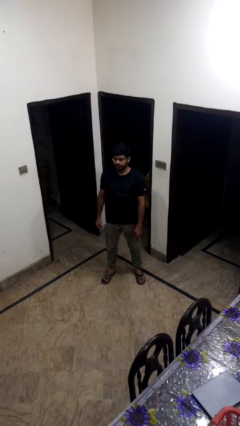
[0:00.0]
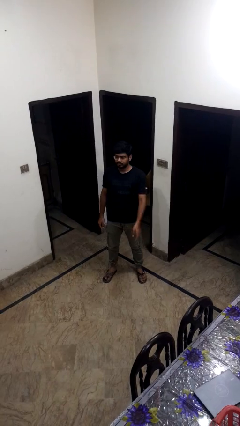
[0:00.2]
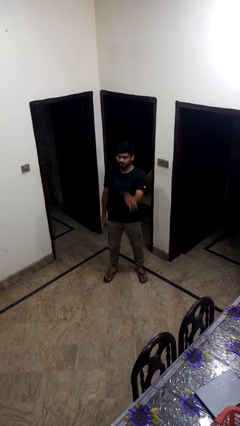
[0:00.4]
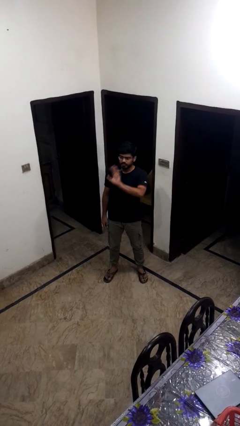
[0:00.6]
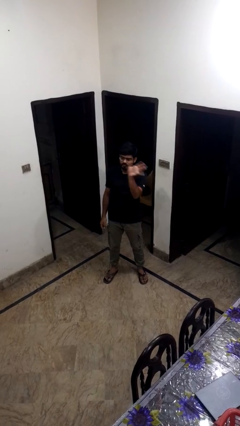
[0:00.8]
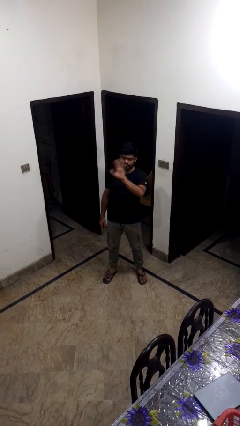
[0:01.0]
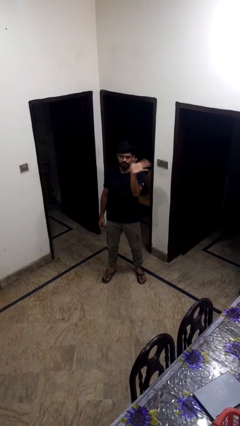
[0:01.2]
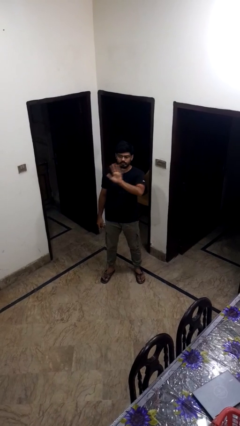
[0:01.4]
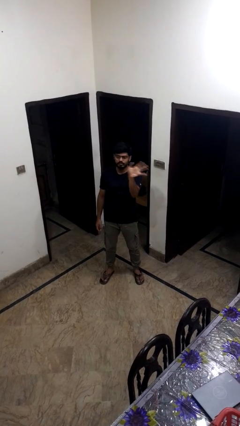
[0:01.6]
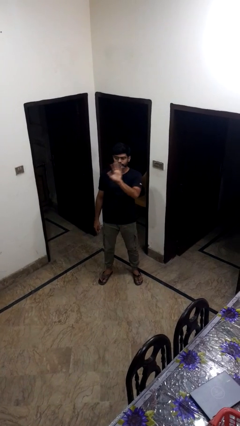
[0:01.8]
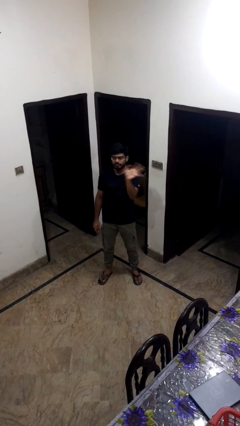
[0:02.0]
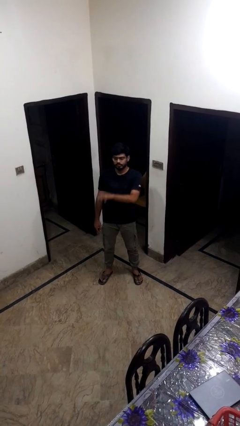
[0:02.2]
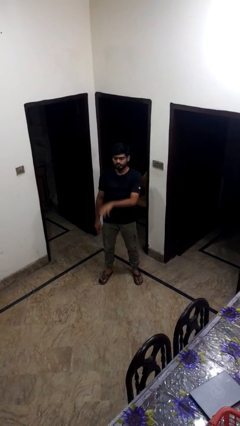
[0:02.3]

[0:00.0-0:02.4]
person waves at person

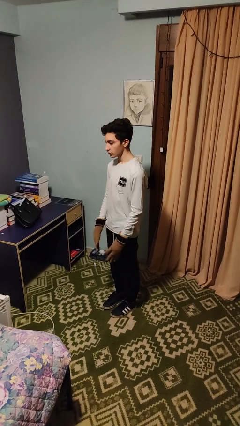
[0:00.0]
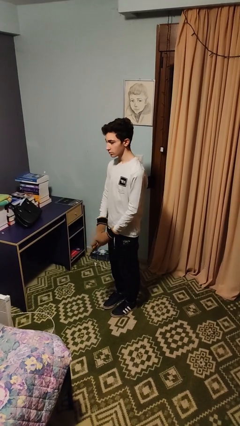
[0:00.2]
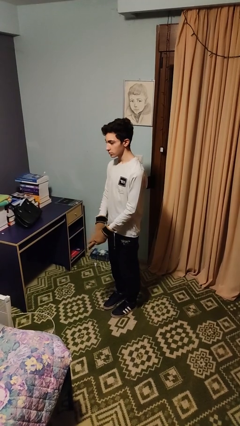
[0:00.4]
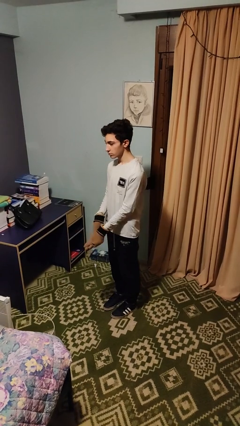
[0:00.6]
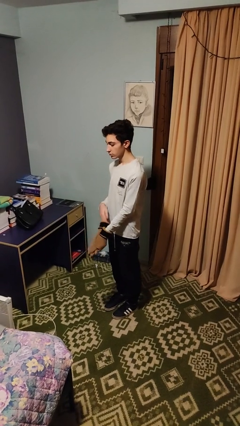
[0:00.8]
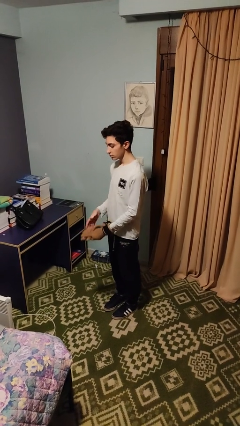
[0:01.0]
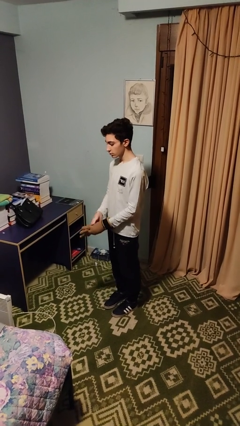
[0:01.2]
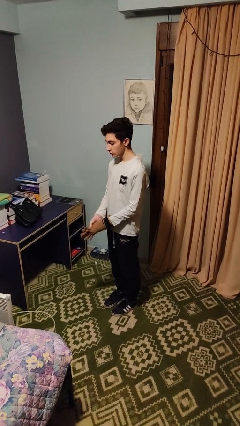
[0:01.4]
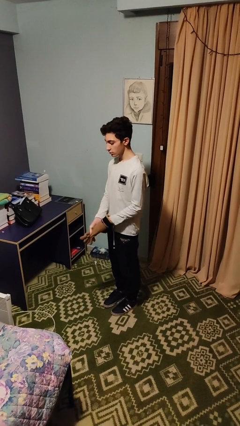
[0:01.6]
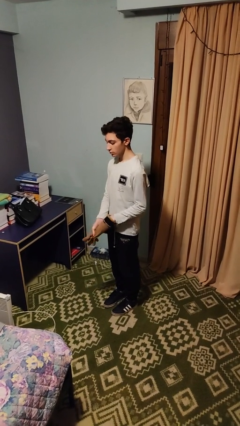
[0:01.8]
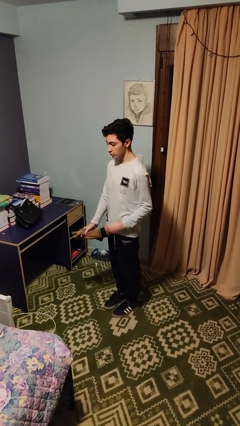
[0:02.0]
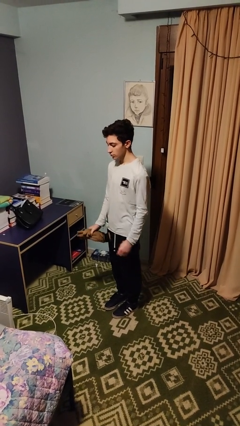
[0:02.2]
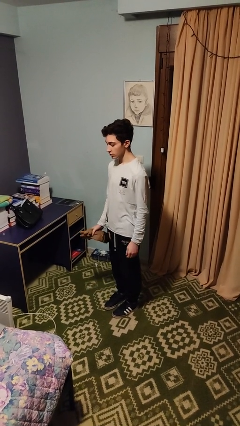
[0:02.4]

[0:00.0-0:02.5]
person takes off gloves

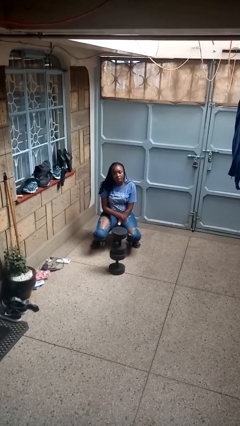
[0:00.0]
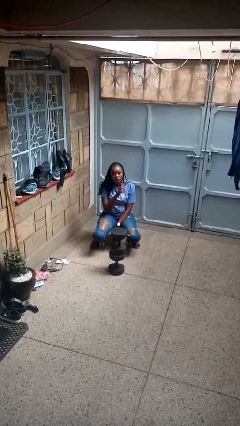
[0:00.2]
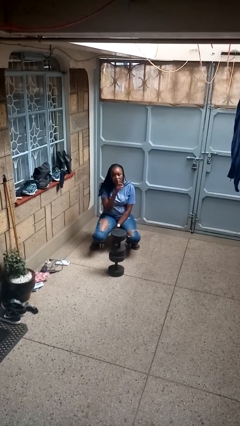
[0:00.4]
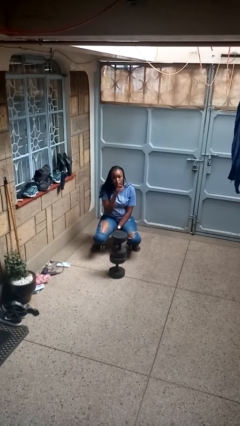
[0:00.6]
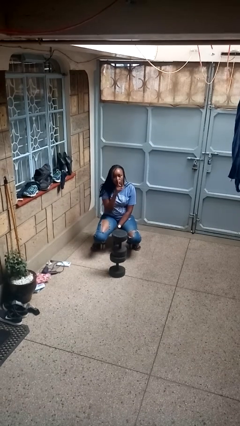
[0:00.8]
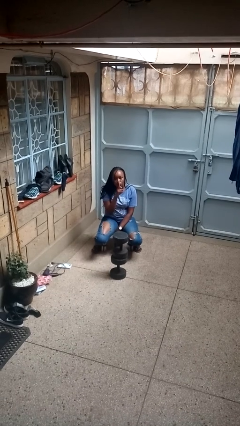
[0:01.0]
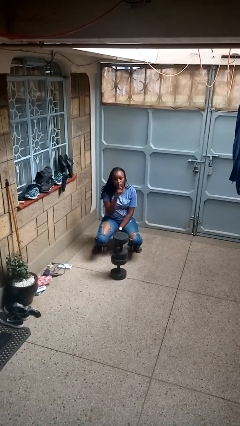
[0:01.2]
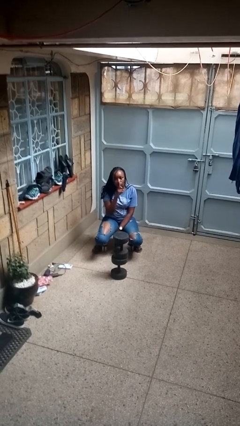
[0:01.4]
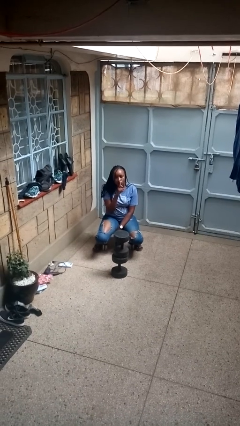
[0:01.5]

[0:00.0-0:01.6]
person gestures be quiet

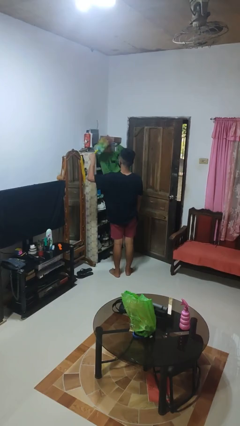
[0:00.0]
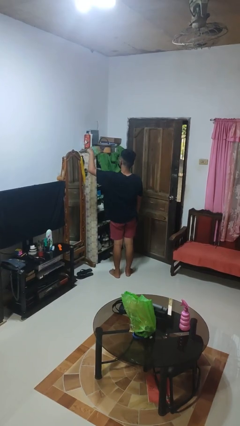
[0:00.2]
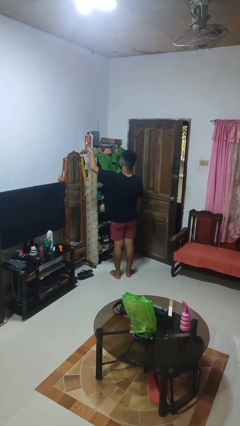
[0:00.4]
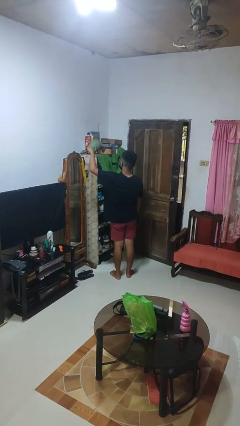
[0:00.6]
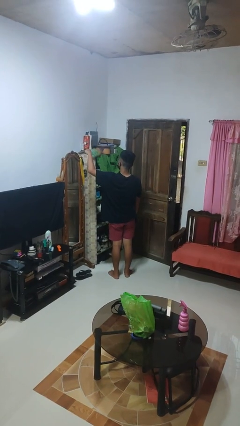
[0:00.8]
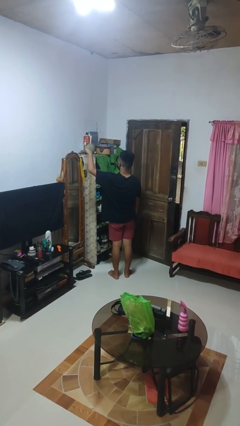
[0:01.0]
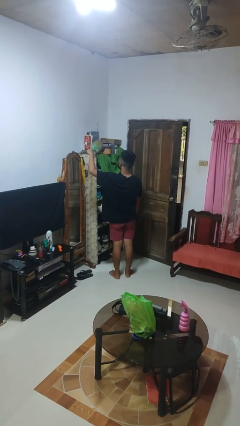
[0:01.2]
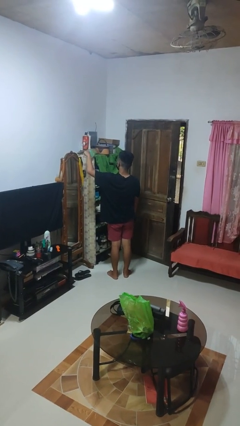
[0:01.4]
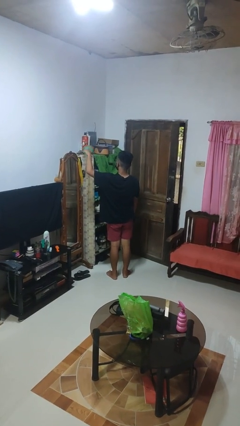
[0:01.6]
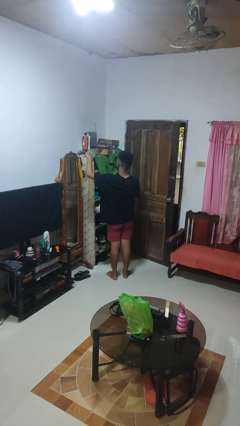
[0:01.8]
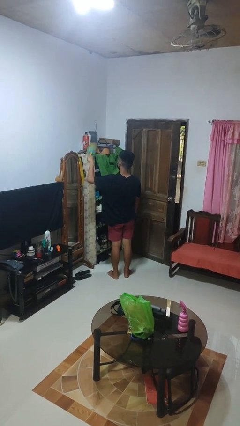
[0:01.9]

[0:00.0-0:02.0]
person dusts furniture

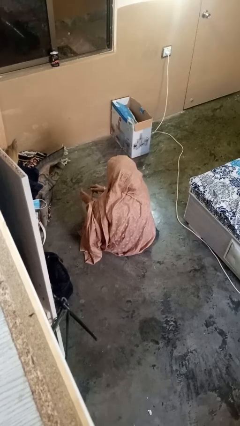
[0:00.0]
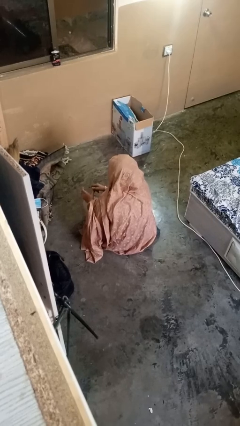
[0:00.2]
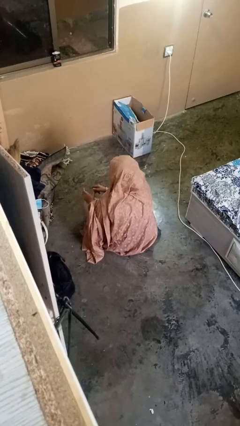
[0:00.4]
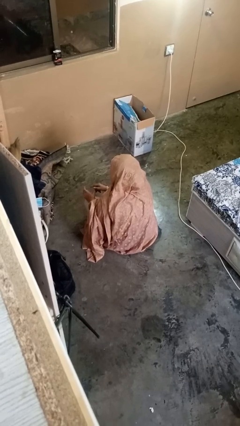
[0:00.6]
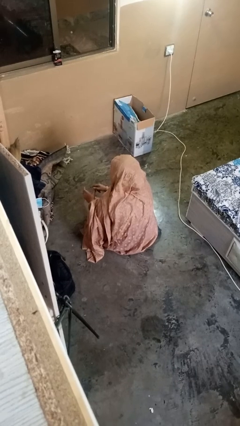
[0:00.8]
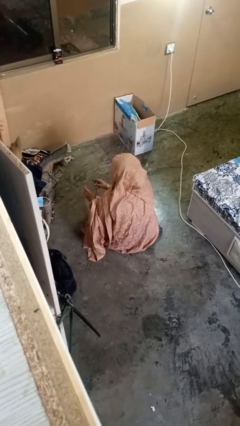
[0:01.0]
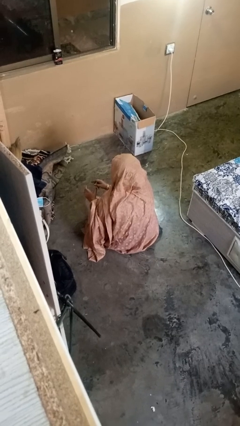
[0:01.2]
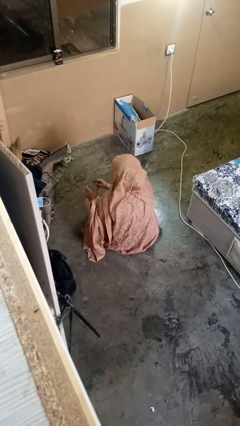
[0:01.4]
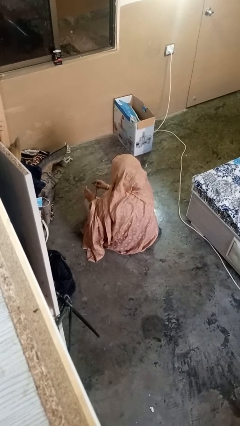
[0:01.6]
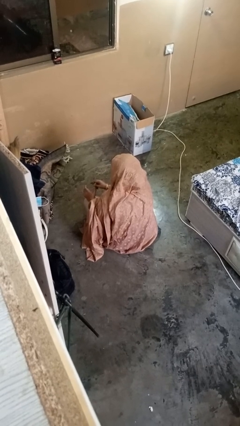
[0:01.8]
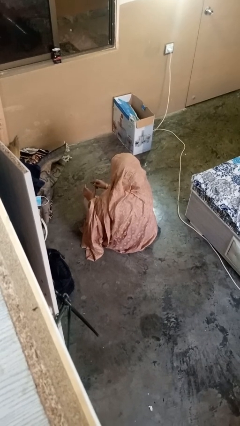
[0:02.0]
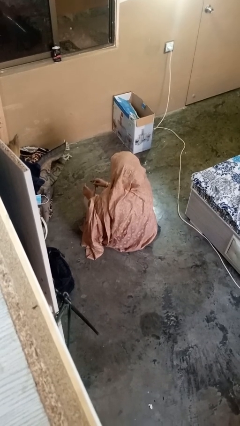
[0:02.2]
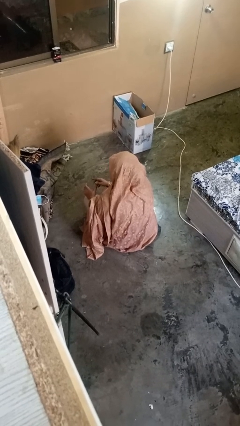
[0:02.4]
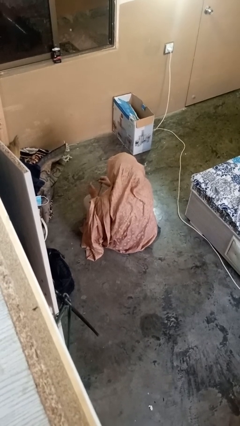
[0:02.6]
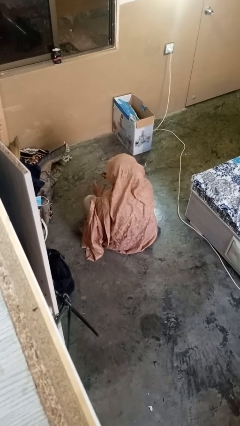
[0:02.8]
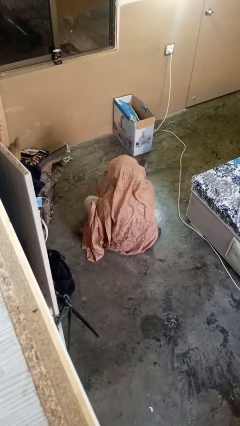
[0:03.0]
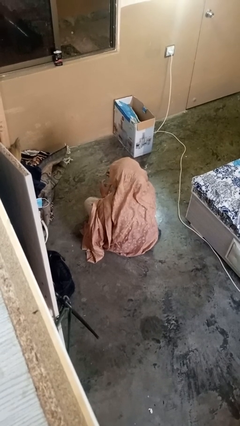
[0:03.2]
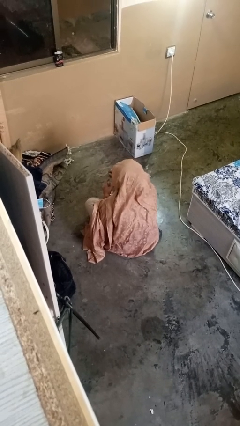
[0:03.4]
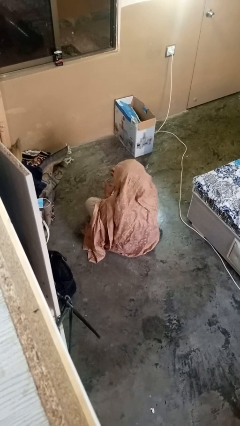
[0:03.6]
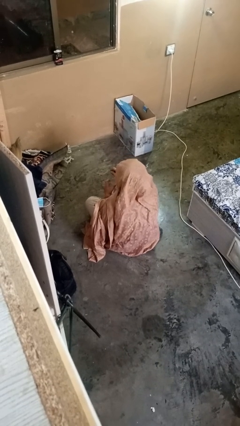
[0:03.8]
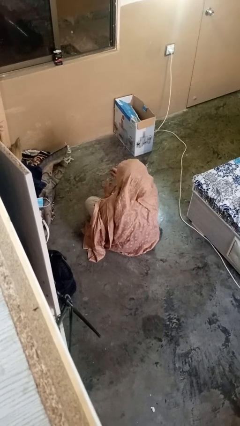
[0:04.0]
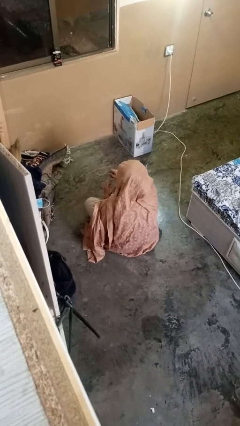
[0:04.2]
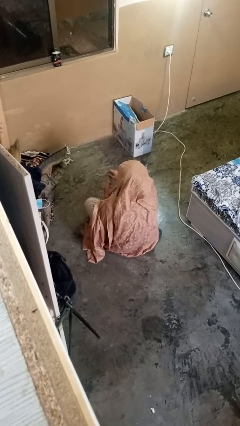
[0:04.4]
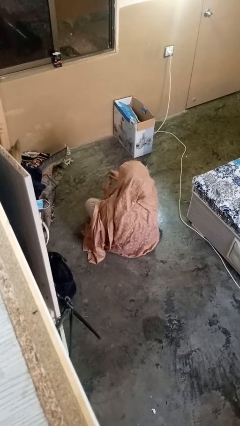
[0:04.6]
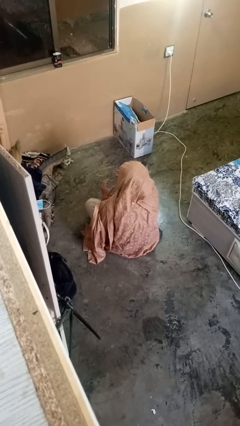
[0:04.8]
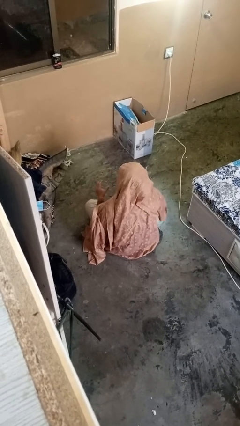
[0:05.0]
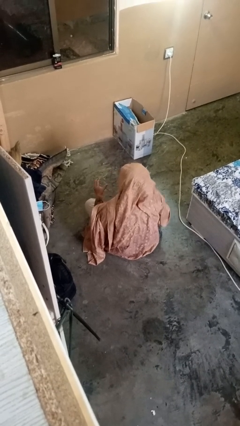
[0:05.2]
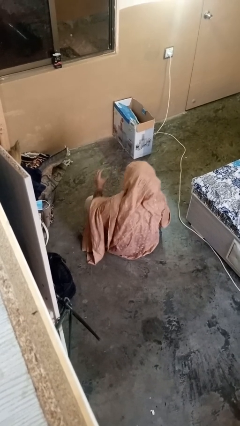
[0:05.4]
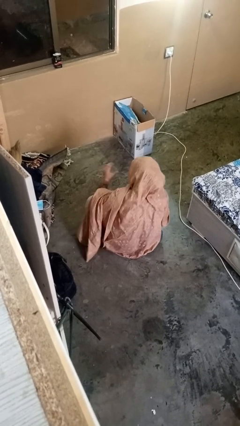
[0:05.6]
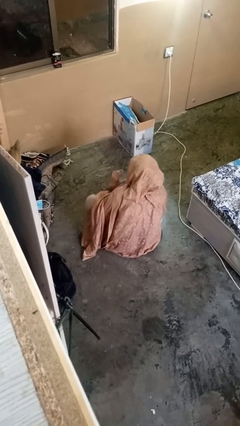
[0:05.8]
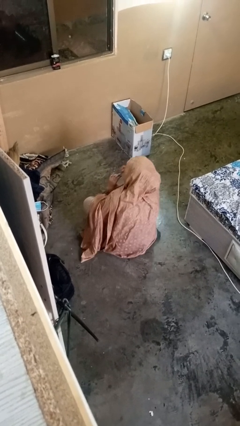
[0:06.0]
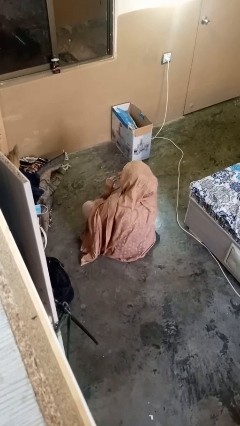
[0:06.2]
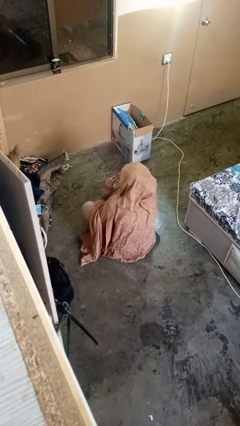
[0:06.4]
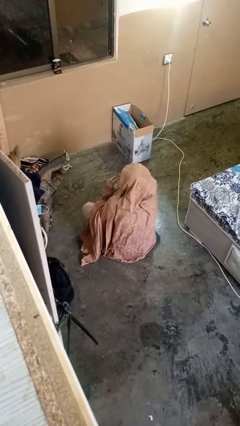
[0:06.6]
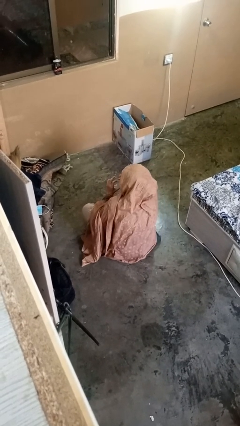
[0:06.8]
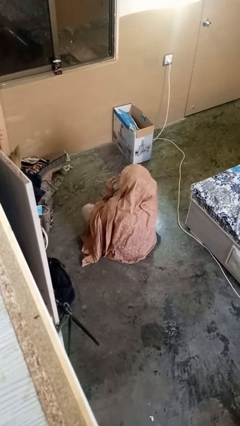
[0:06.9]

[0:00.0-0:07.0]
person drinks from straw

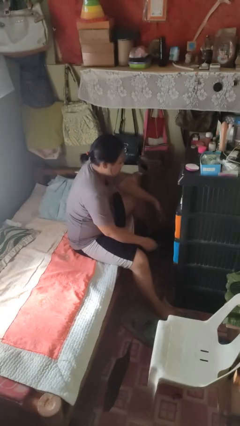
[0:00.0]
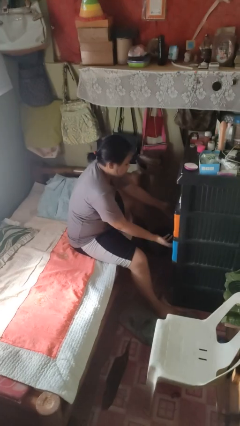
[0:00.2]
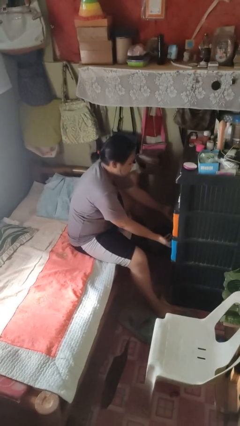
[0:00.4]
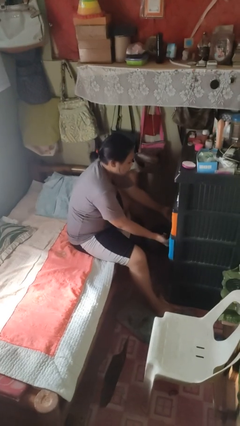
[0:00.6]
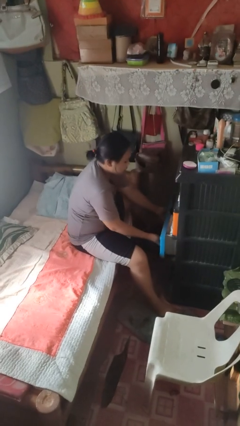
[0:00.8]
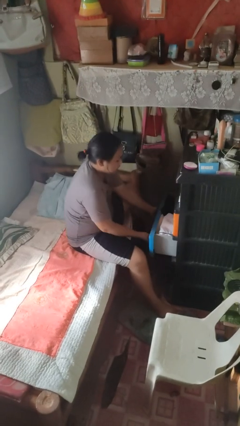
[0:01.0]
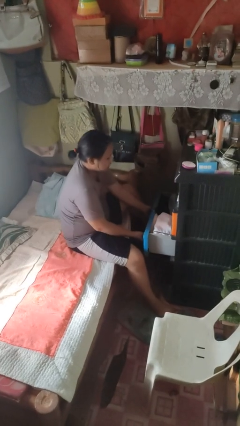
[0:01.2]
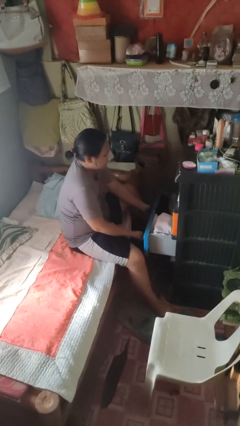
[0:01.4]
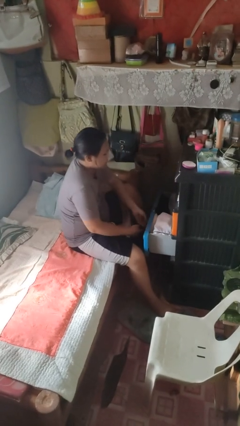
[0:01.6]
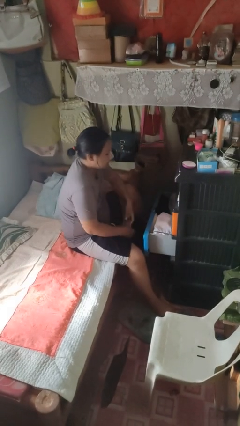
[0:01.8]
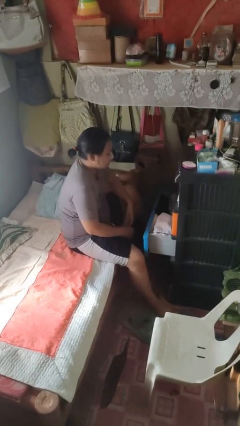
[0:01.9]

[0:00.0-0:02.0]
person opens dresser drawer

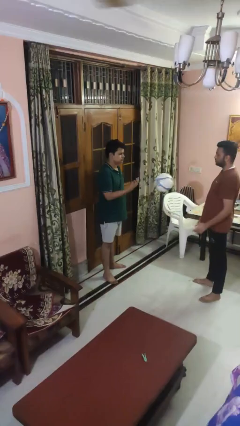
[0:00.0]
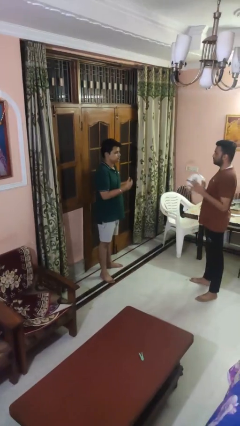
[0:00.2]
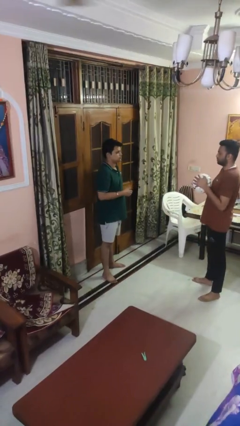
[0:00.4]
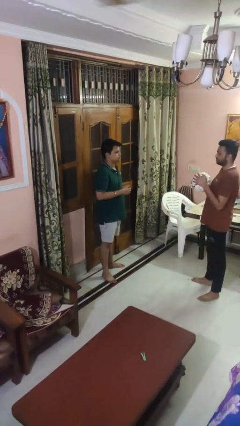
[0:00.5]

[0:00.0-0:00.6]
person throws object to person
